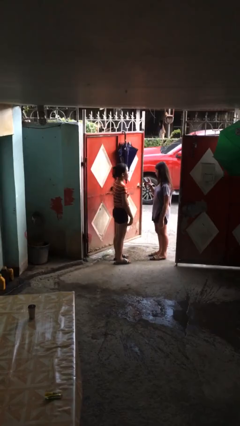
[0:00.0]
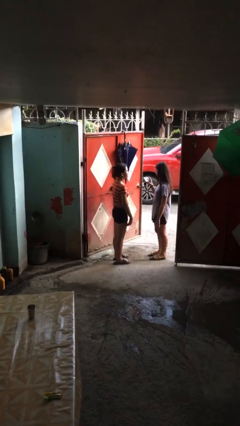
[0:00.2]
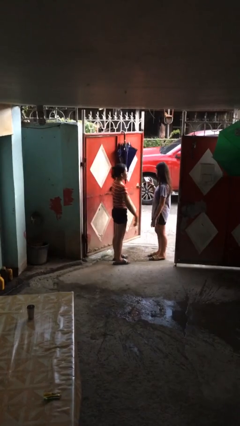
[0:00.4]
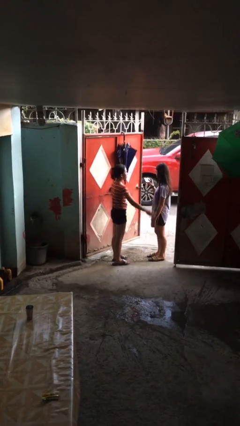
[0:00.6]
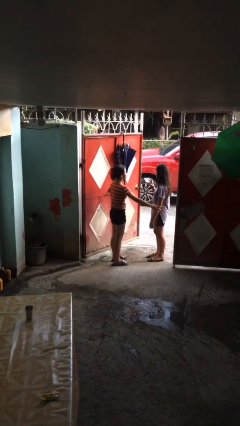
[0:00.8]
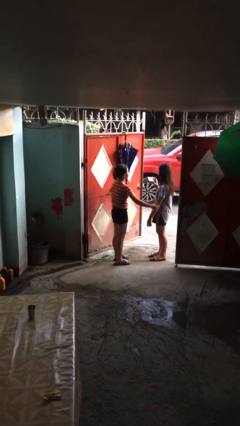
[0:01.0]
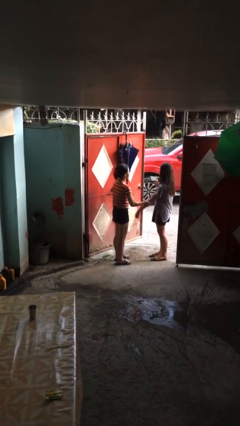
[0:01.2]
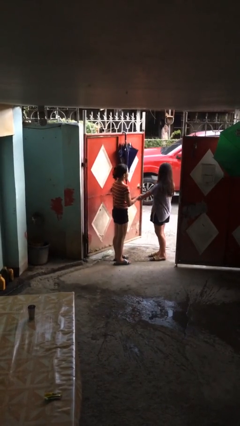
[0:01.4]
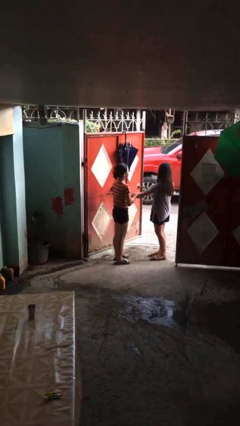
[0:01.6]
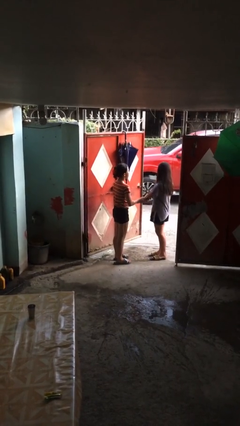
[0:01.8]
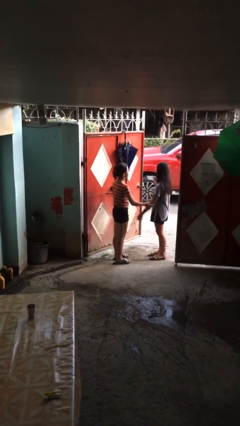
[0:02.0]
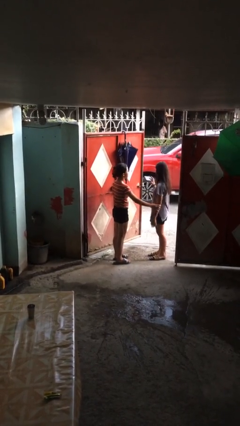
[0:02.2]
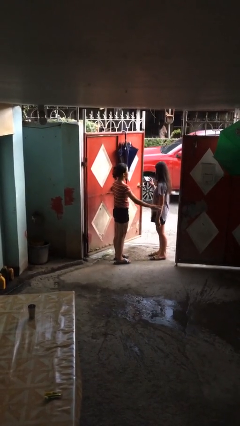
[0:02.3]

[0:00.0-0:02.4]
person grabs person by forearm

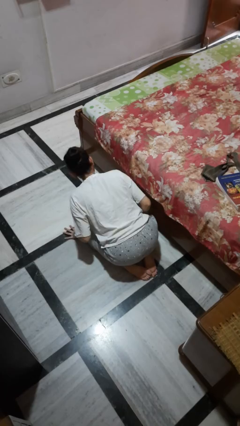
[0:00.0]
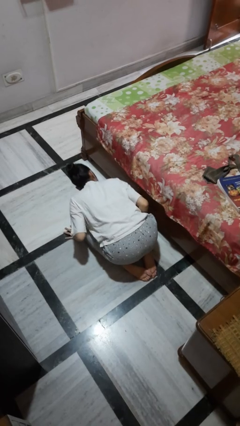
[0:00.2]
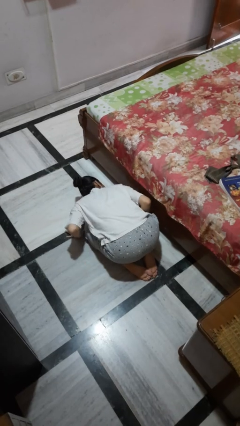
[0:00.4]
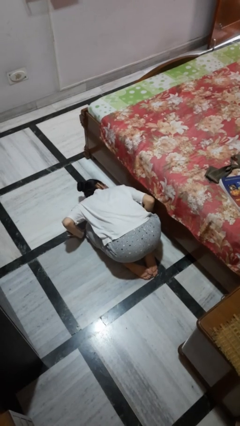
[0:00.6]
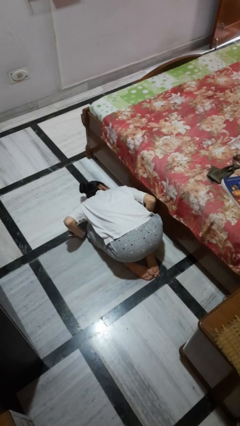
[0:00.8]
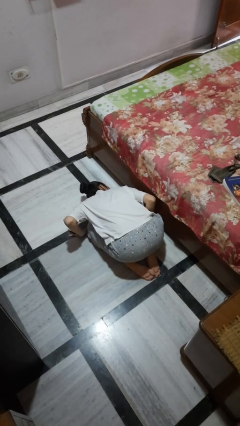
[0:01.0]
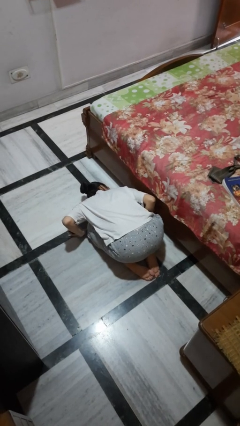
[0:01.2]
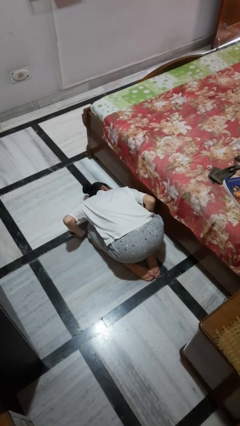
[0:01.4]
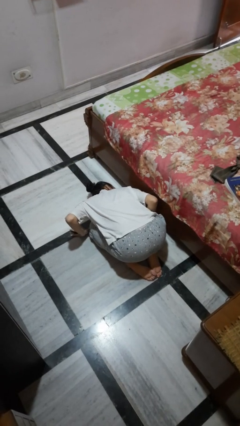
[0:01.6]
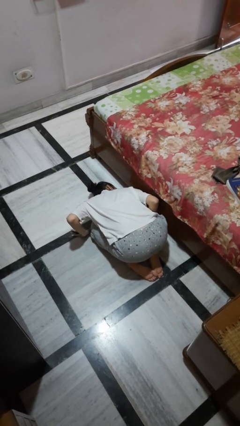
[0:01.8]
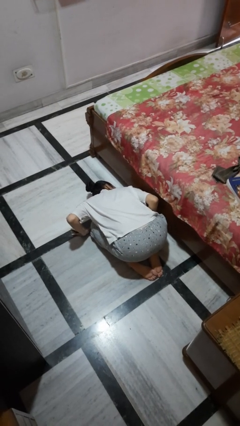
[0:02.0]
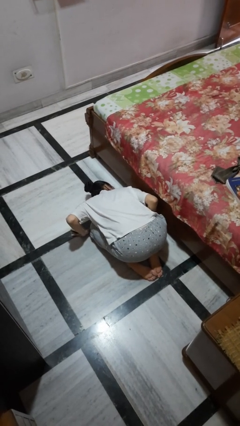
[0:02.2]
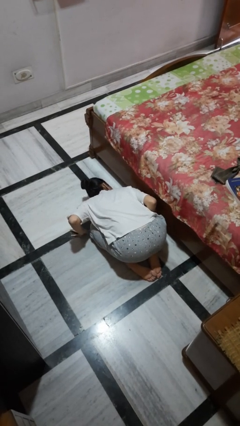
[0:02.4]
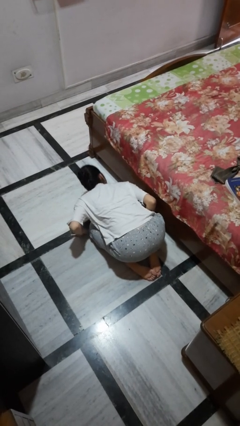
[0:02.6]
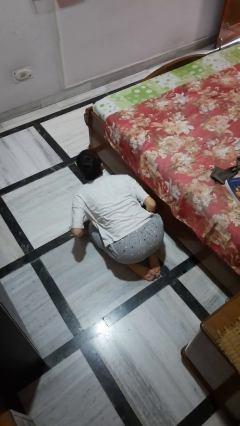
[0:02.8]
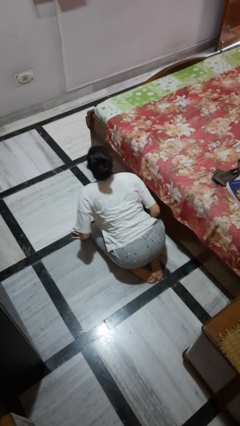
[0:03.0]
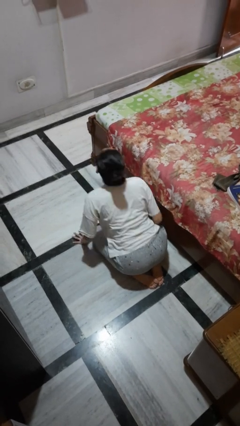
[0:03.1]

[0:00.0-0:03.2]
person searches under bed

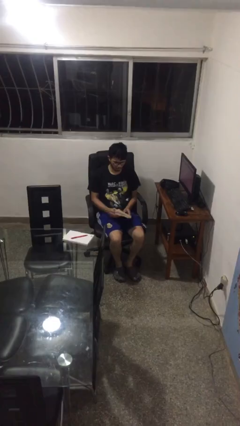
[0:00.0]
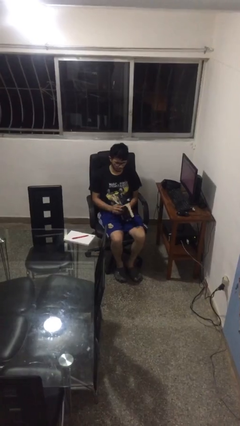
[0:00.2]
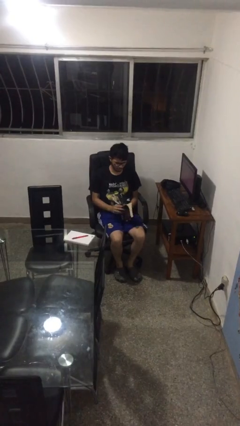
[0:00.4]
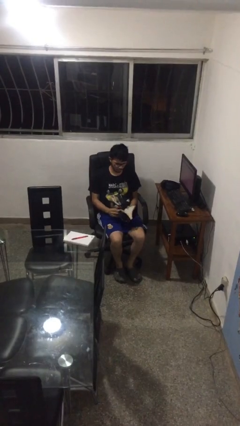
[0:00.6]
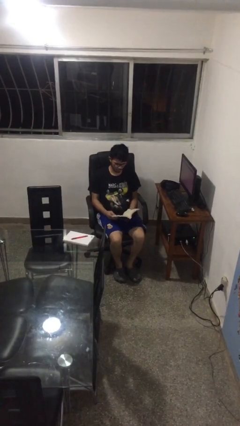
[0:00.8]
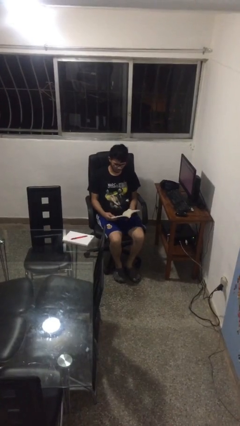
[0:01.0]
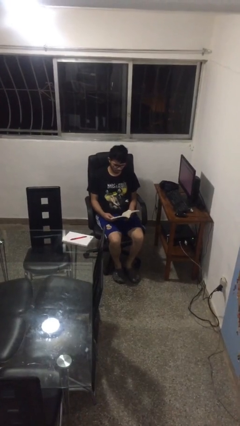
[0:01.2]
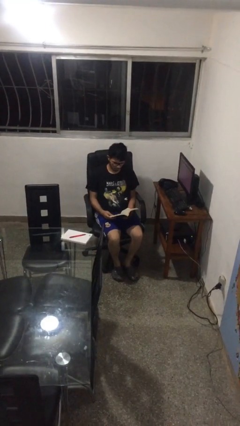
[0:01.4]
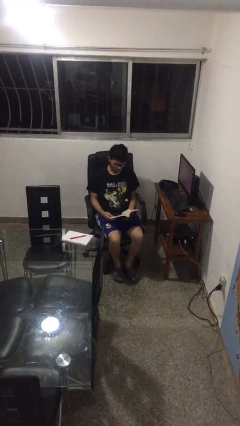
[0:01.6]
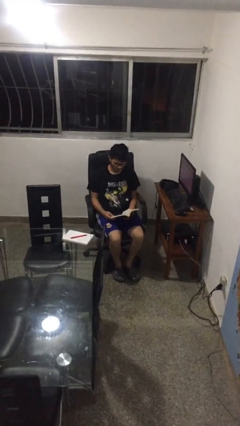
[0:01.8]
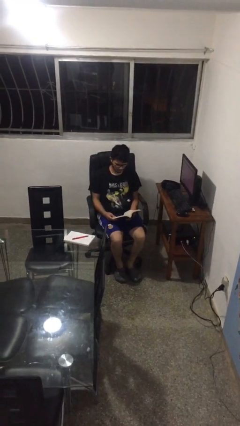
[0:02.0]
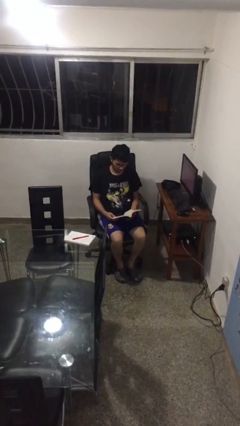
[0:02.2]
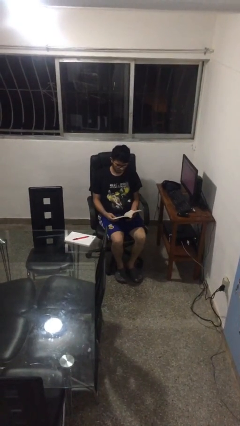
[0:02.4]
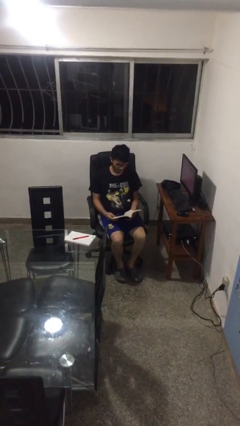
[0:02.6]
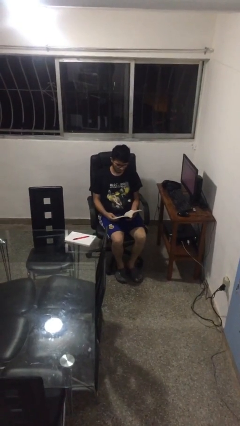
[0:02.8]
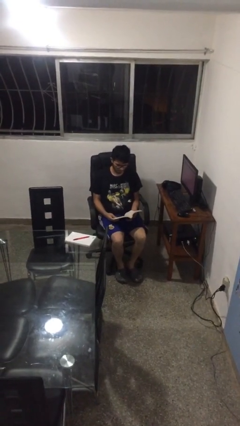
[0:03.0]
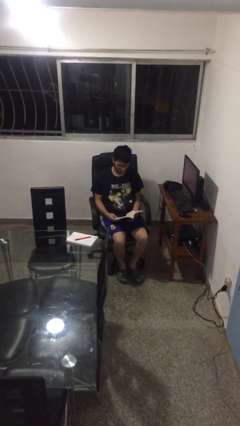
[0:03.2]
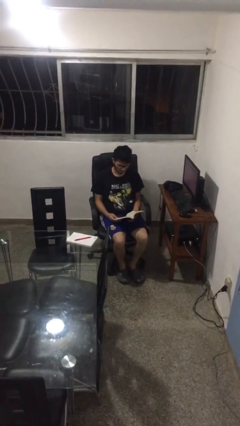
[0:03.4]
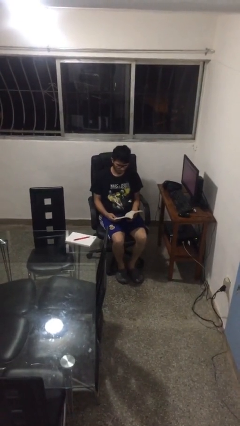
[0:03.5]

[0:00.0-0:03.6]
person reads book

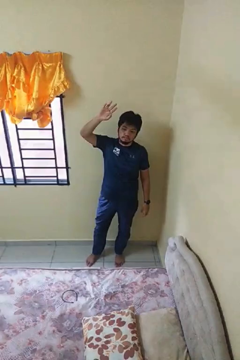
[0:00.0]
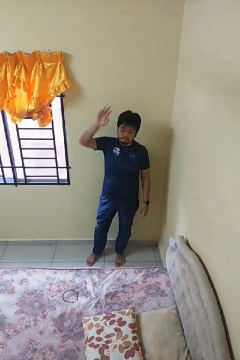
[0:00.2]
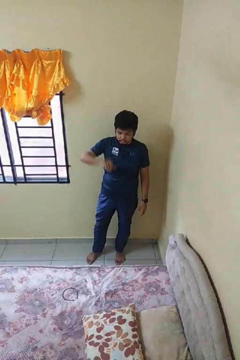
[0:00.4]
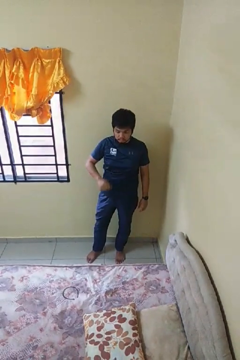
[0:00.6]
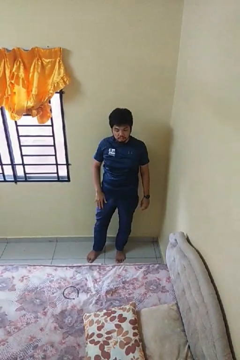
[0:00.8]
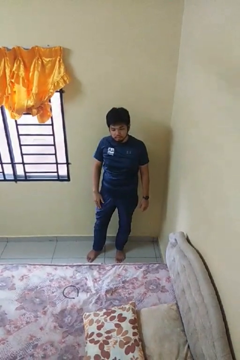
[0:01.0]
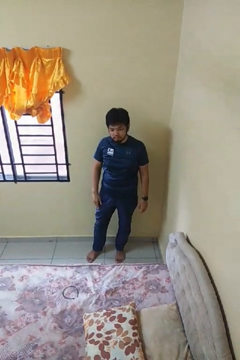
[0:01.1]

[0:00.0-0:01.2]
person gestures swipe down

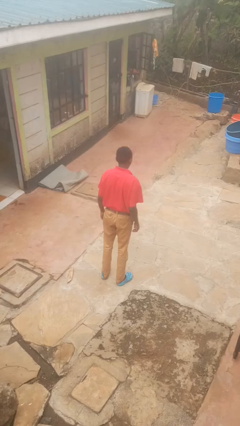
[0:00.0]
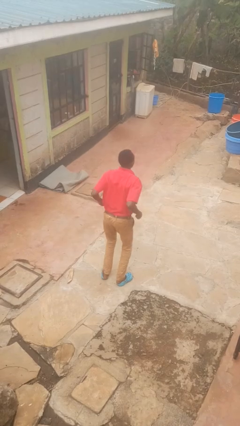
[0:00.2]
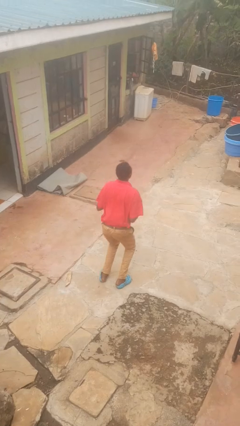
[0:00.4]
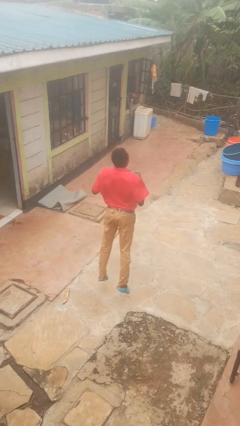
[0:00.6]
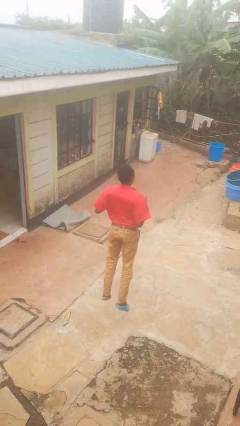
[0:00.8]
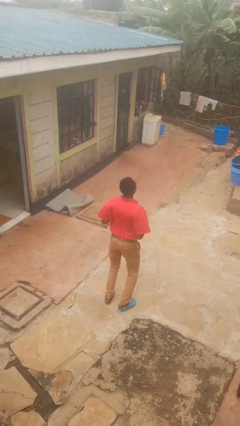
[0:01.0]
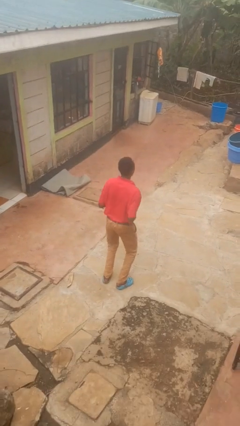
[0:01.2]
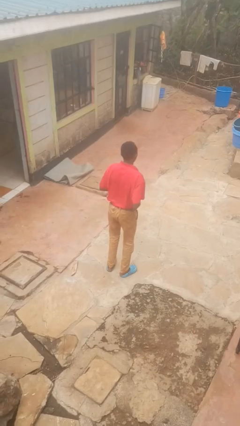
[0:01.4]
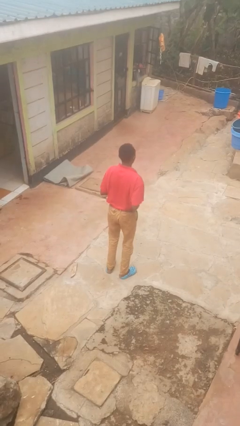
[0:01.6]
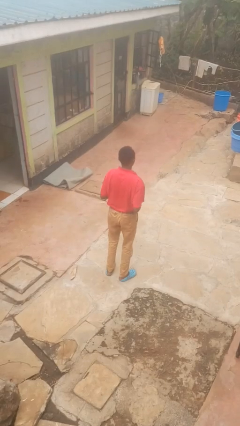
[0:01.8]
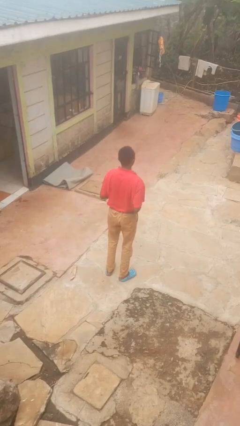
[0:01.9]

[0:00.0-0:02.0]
person jumps

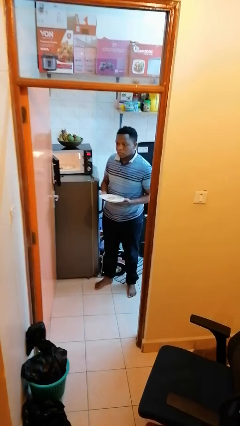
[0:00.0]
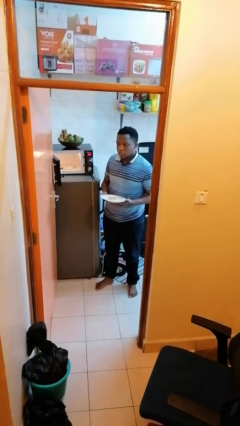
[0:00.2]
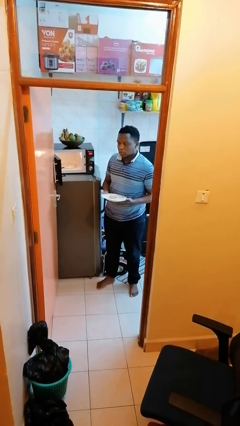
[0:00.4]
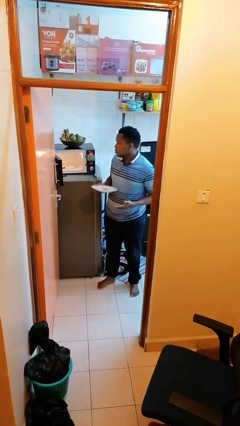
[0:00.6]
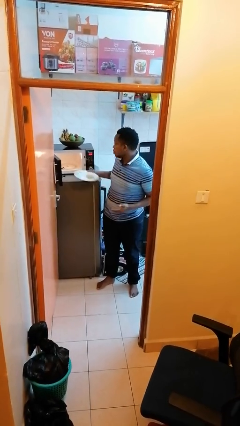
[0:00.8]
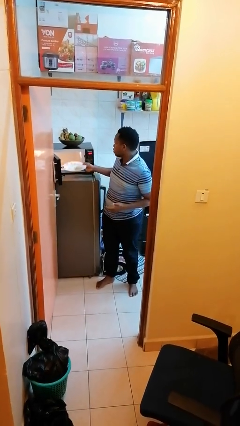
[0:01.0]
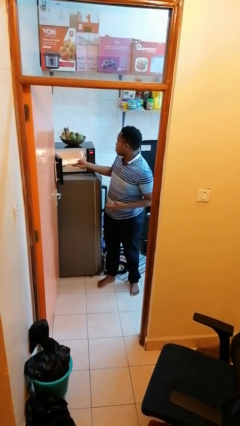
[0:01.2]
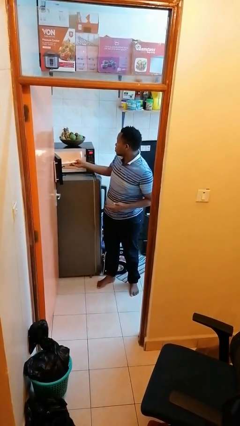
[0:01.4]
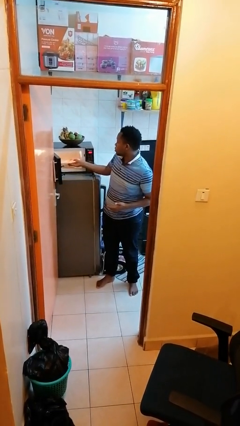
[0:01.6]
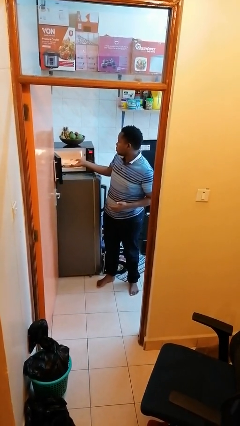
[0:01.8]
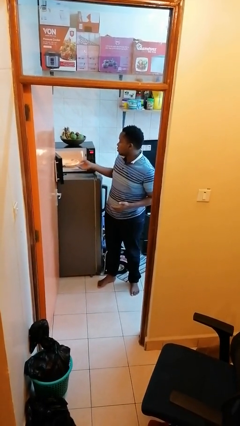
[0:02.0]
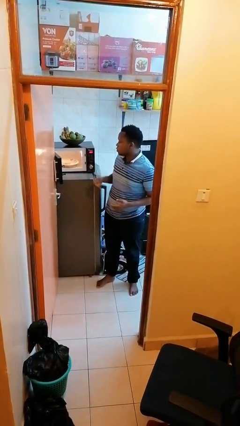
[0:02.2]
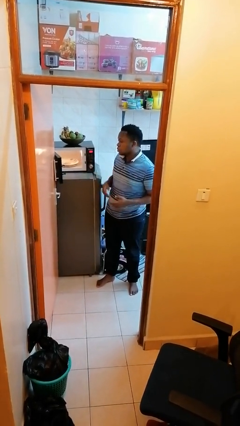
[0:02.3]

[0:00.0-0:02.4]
person puts object into microwave

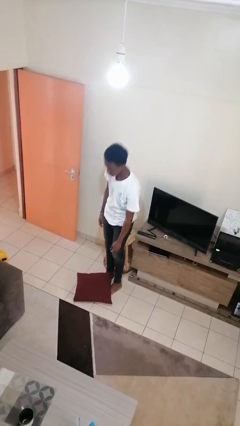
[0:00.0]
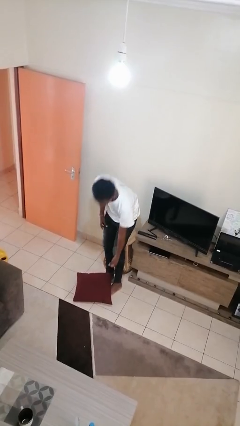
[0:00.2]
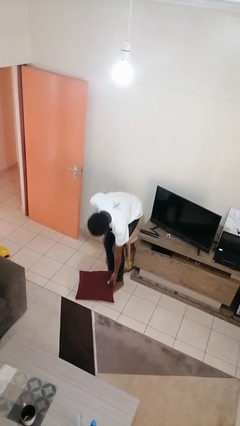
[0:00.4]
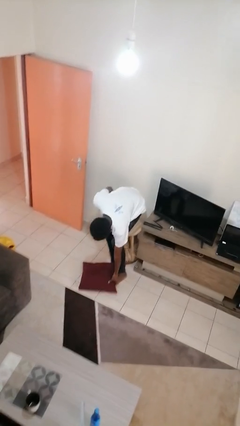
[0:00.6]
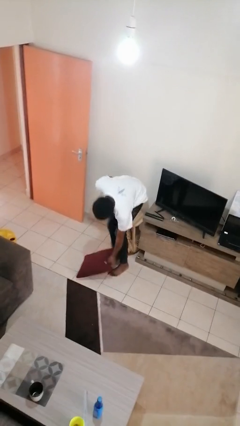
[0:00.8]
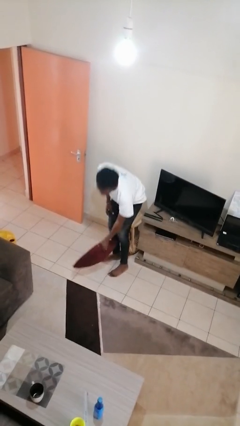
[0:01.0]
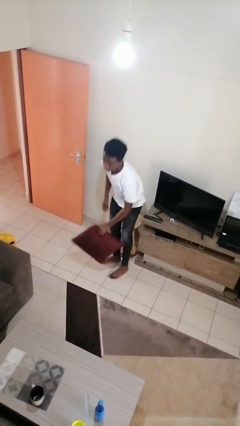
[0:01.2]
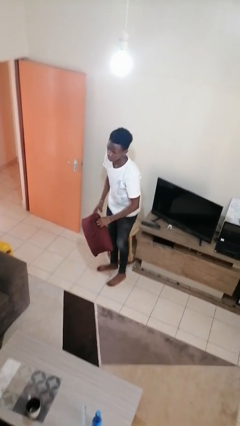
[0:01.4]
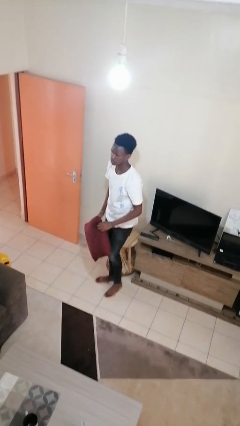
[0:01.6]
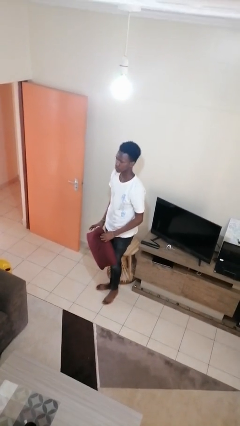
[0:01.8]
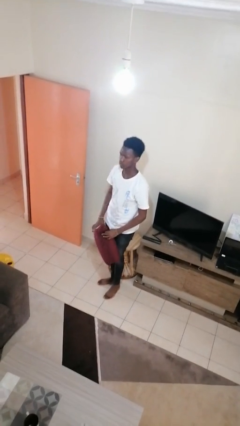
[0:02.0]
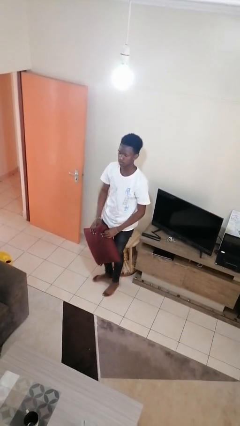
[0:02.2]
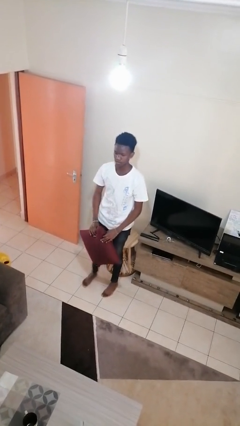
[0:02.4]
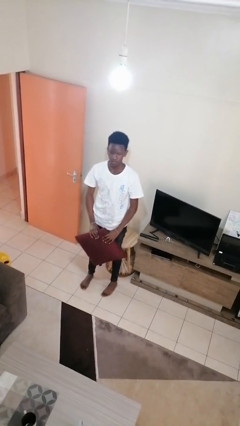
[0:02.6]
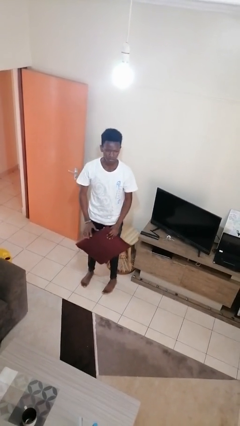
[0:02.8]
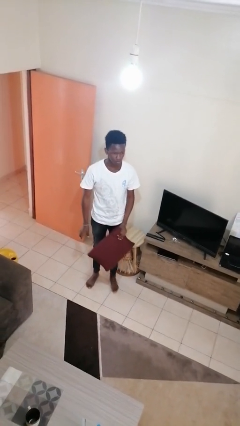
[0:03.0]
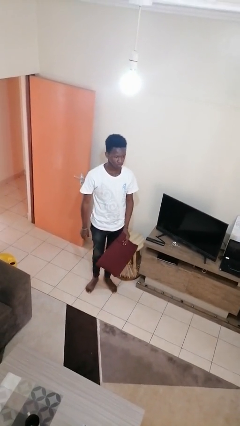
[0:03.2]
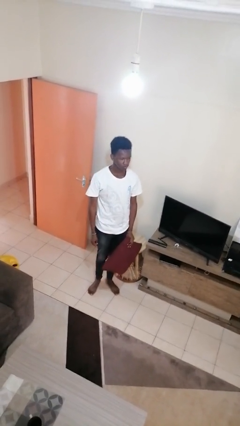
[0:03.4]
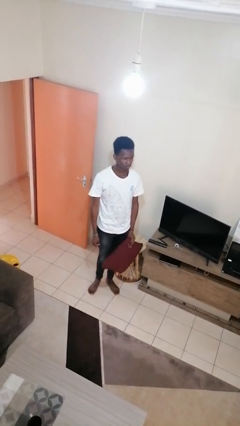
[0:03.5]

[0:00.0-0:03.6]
person picks up object from floor
